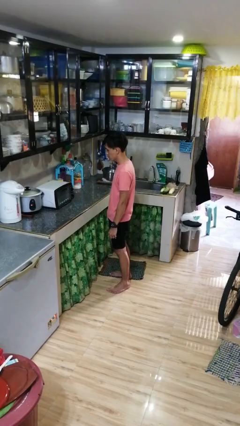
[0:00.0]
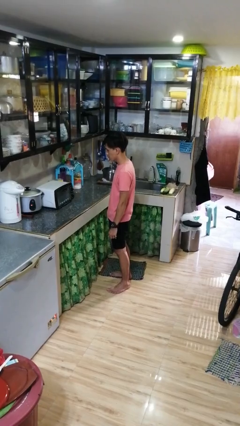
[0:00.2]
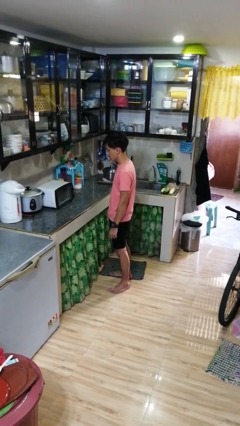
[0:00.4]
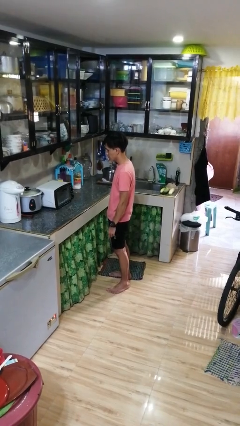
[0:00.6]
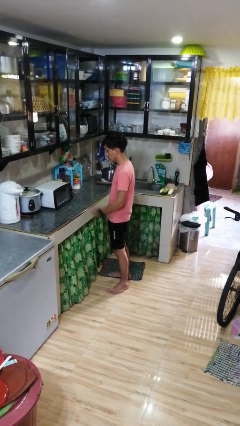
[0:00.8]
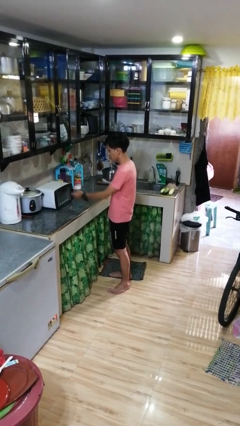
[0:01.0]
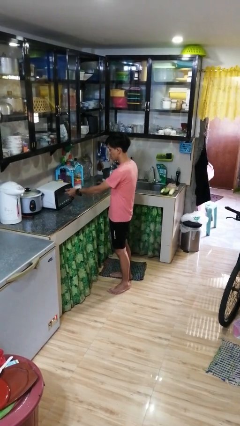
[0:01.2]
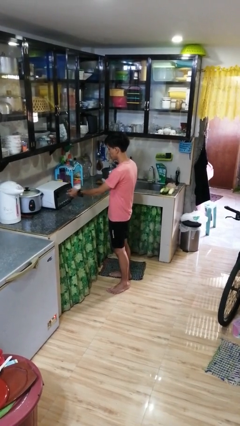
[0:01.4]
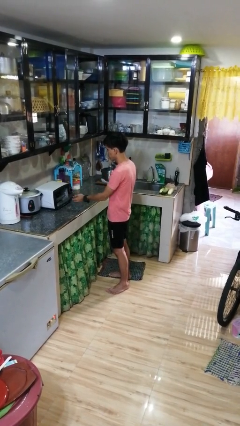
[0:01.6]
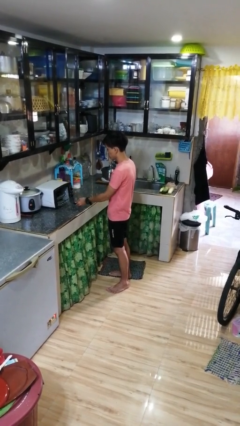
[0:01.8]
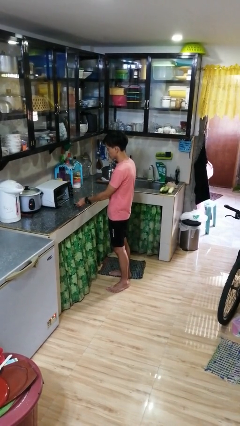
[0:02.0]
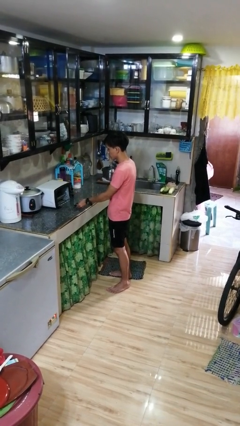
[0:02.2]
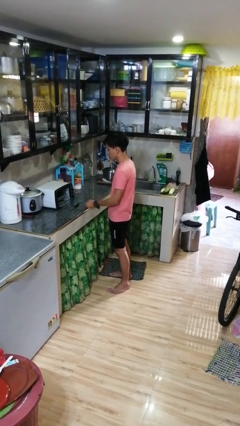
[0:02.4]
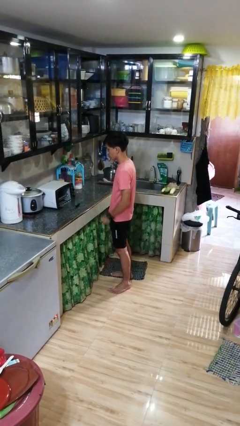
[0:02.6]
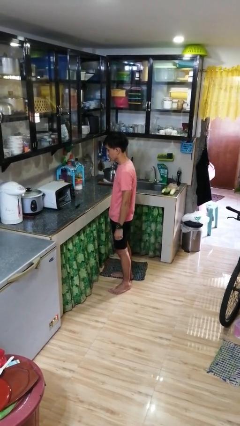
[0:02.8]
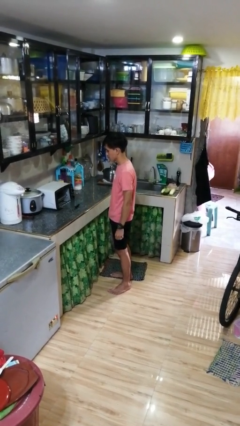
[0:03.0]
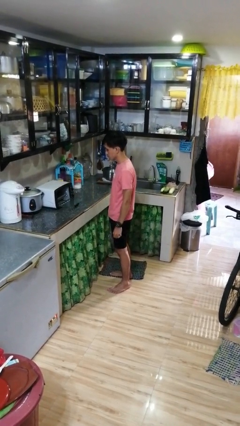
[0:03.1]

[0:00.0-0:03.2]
person opens microwave

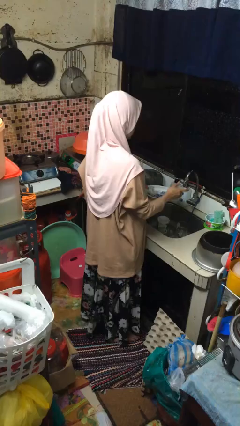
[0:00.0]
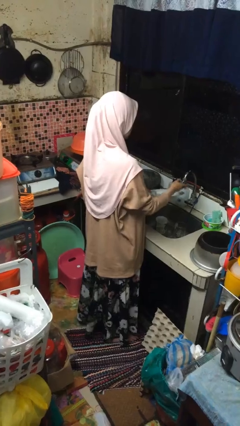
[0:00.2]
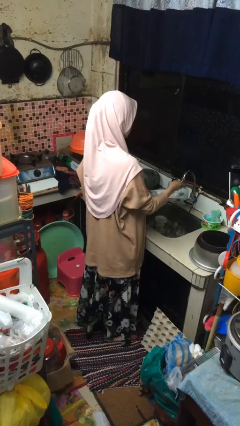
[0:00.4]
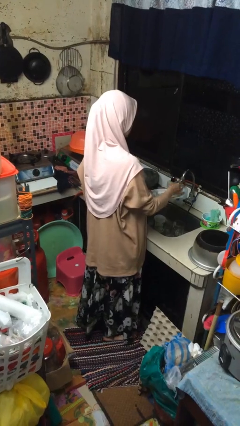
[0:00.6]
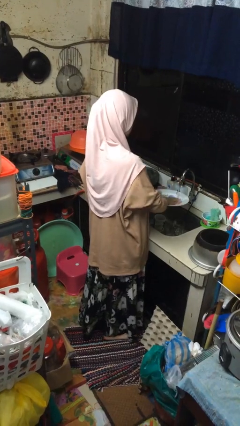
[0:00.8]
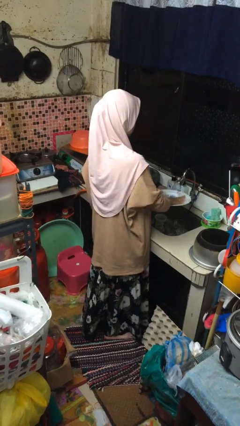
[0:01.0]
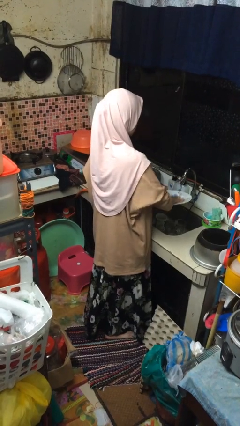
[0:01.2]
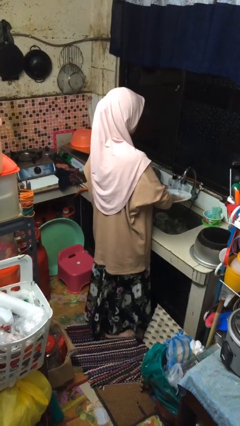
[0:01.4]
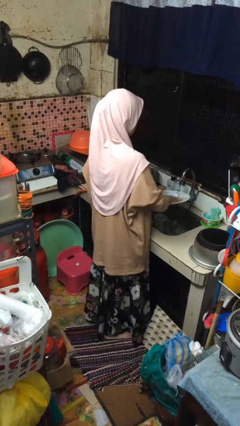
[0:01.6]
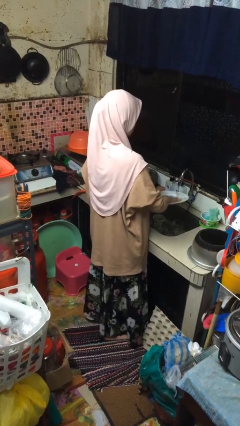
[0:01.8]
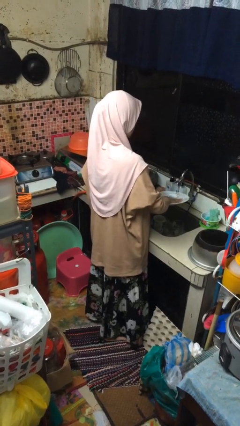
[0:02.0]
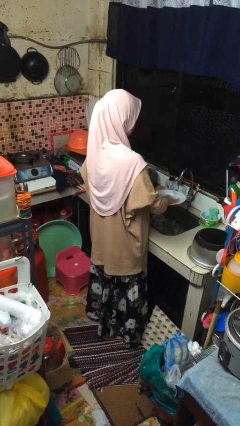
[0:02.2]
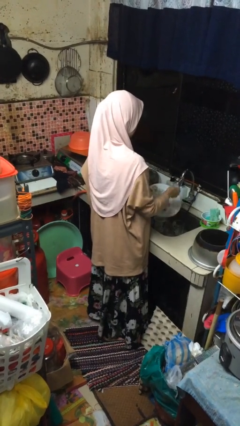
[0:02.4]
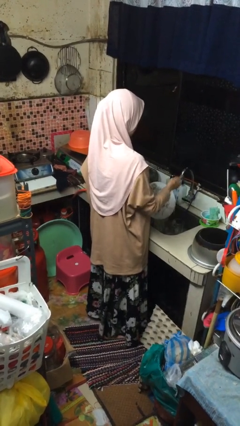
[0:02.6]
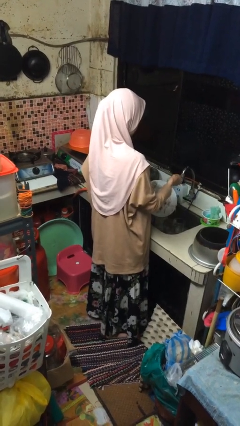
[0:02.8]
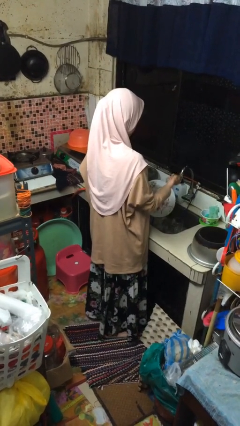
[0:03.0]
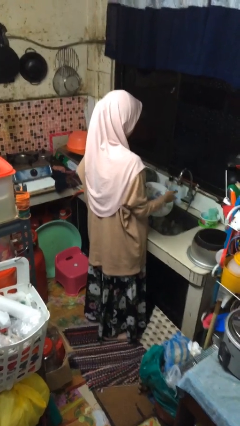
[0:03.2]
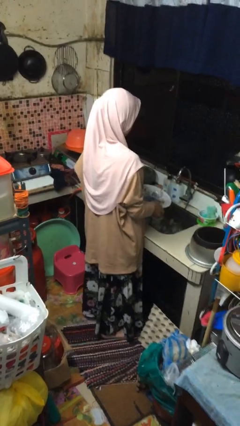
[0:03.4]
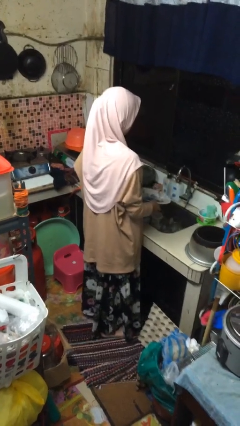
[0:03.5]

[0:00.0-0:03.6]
person washes dish

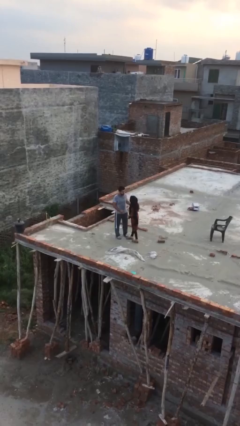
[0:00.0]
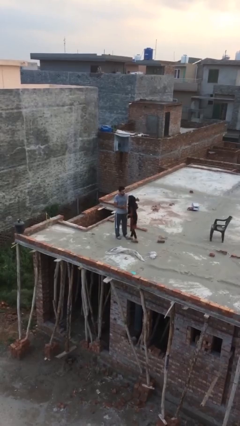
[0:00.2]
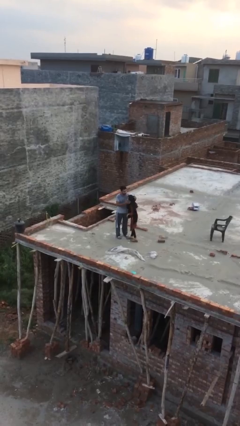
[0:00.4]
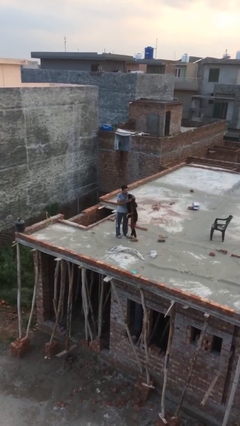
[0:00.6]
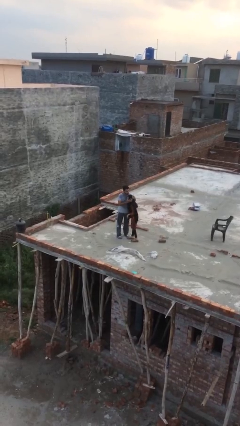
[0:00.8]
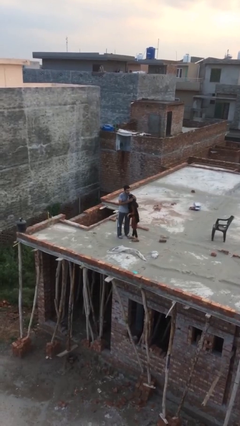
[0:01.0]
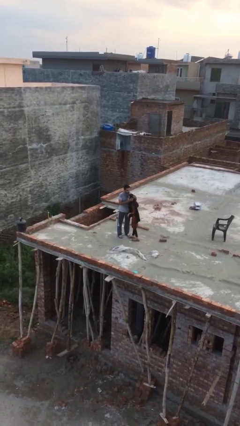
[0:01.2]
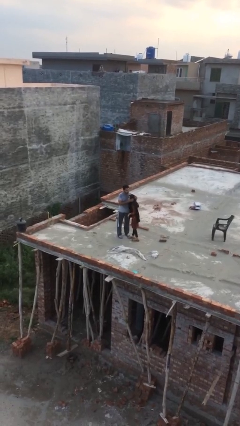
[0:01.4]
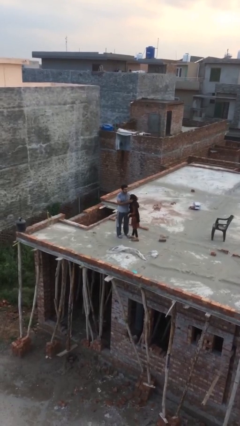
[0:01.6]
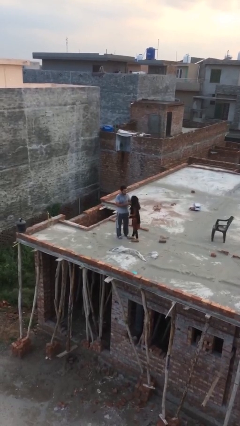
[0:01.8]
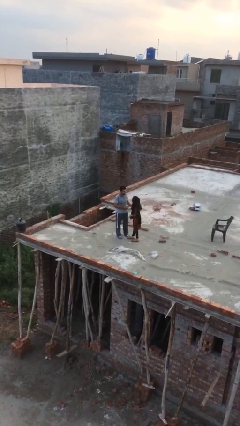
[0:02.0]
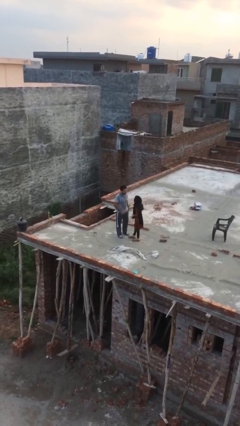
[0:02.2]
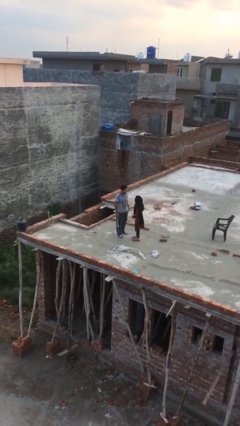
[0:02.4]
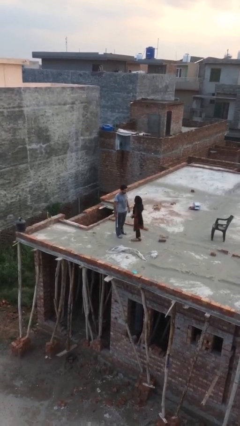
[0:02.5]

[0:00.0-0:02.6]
person embraces person

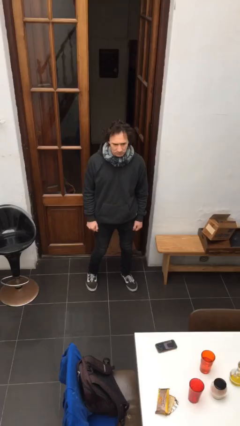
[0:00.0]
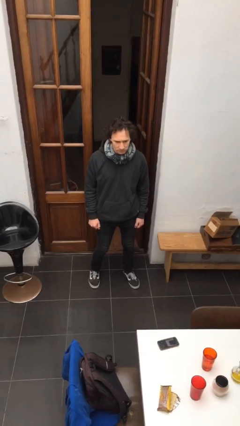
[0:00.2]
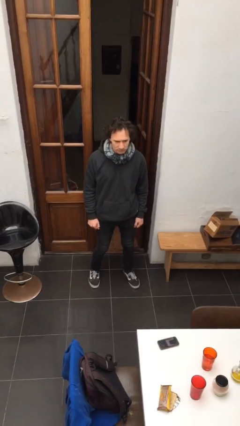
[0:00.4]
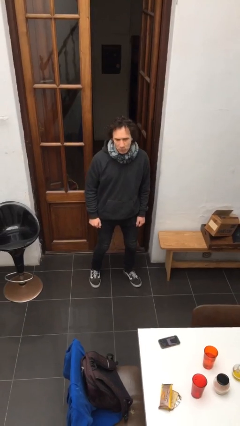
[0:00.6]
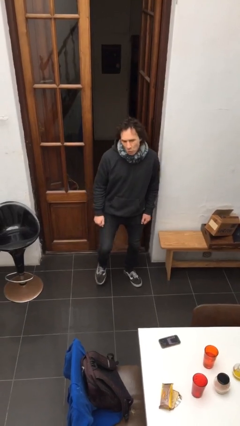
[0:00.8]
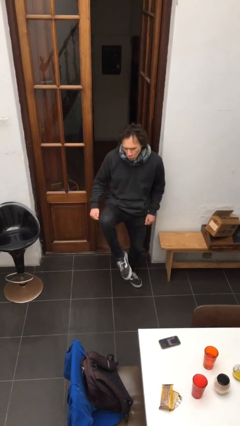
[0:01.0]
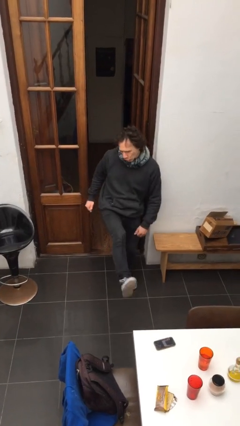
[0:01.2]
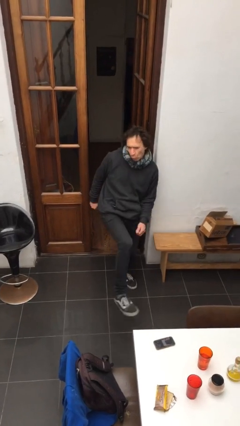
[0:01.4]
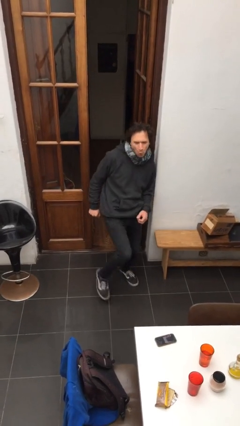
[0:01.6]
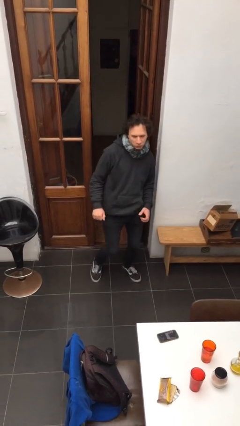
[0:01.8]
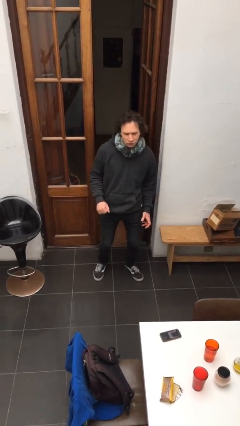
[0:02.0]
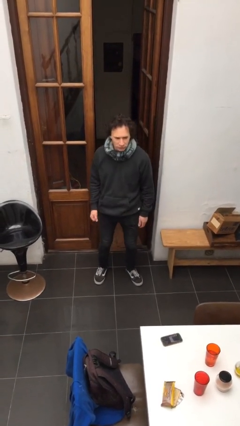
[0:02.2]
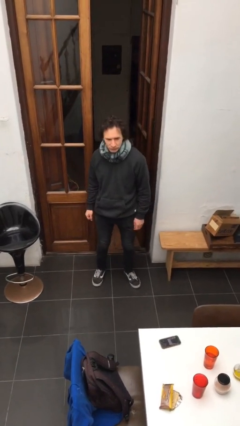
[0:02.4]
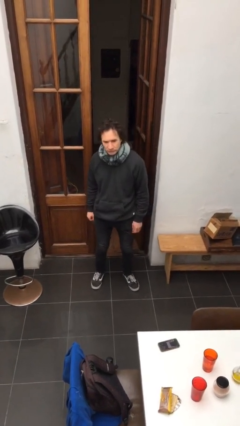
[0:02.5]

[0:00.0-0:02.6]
person karate kicks

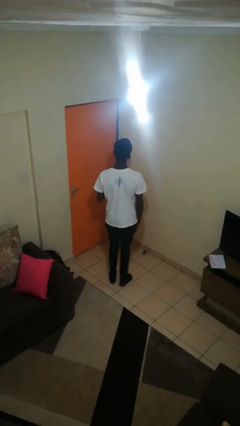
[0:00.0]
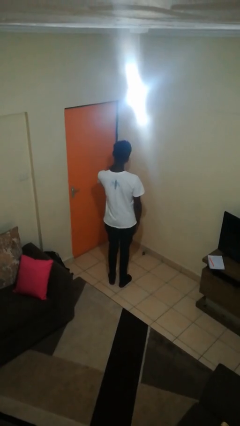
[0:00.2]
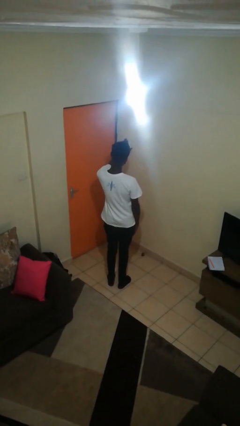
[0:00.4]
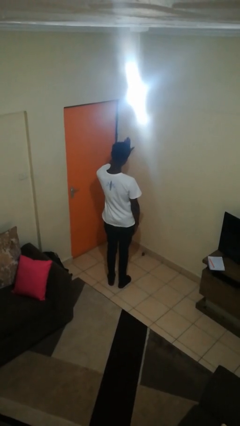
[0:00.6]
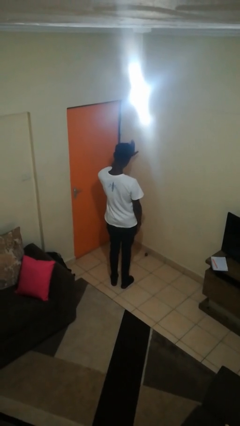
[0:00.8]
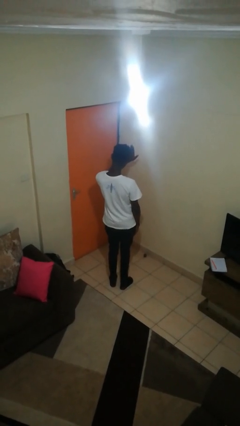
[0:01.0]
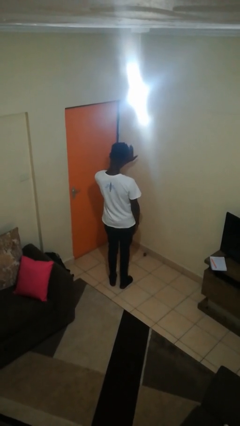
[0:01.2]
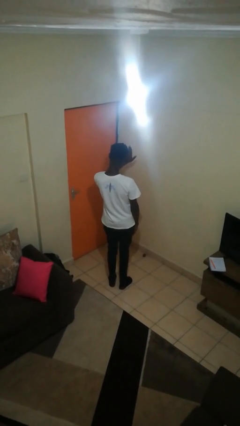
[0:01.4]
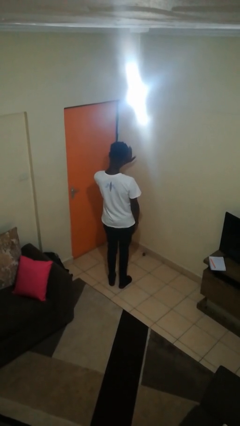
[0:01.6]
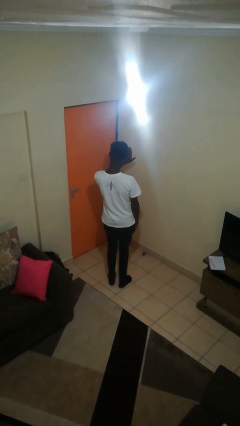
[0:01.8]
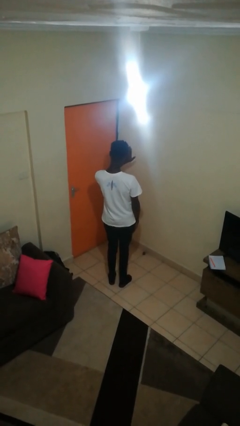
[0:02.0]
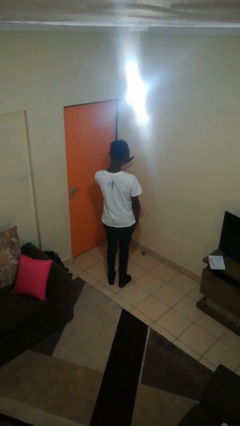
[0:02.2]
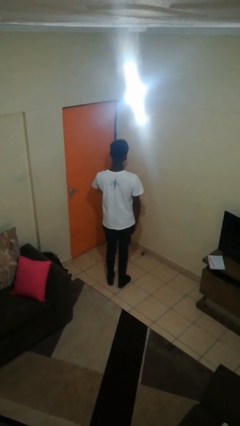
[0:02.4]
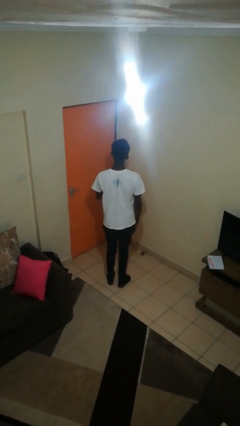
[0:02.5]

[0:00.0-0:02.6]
person gestures stop

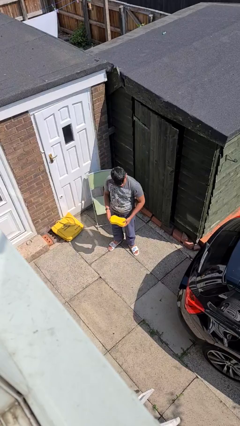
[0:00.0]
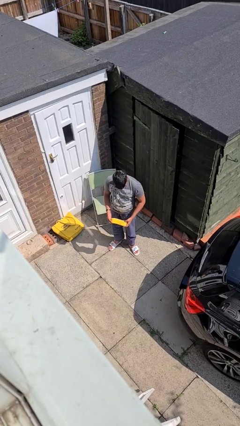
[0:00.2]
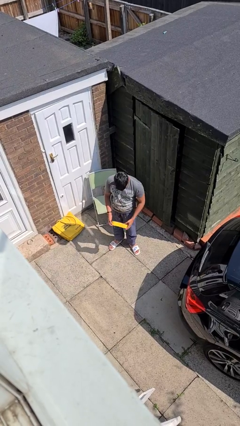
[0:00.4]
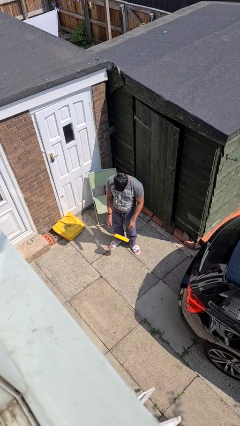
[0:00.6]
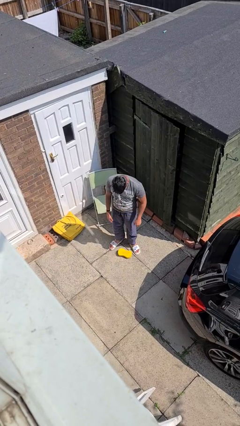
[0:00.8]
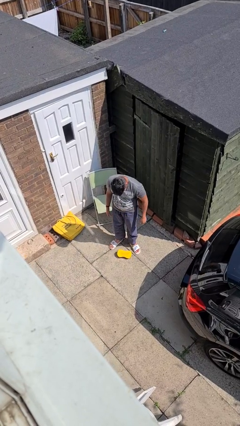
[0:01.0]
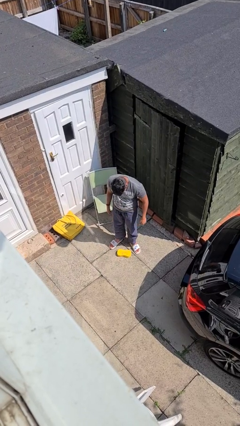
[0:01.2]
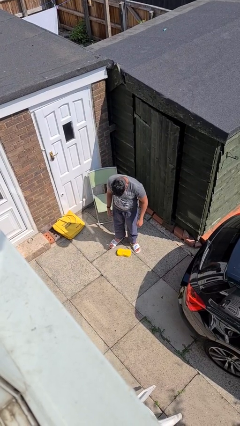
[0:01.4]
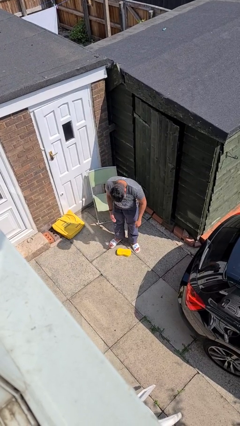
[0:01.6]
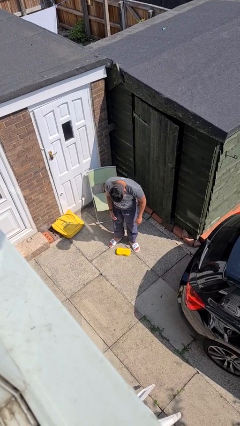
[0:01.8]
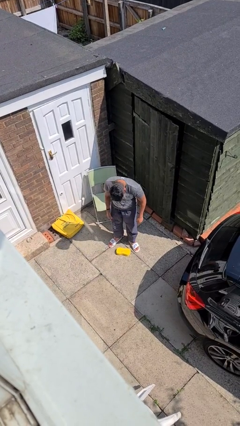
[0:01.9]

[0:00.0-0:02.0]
person drops object

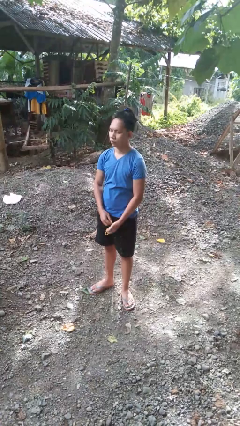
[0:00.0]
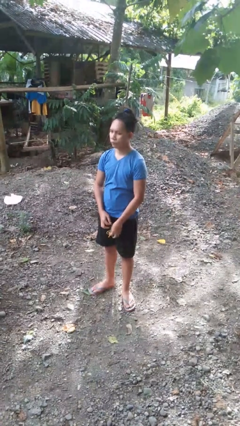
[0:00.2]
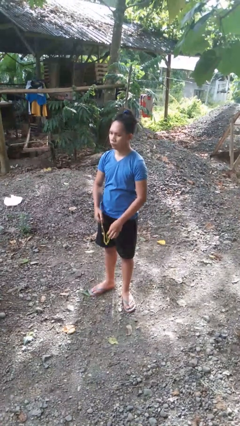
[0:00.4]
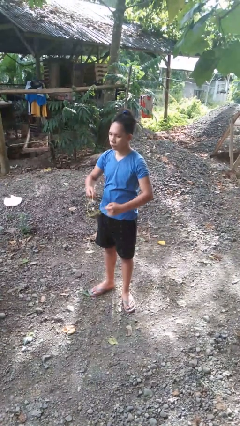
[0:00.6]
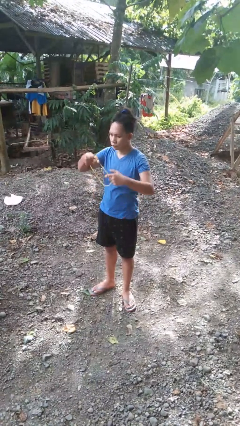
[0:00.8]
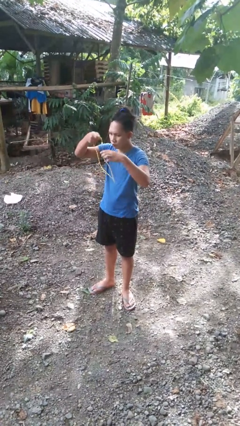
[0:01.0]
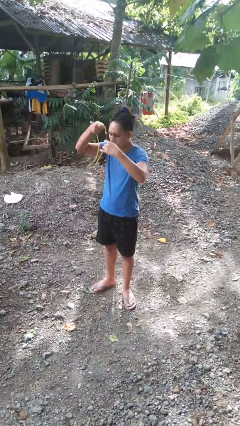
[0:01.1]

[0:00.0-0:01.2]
person puts on necklace
